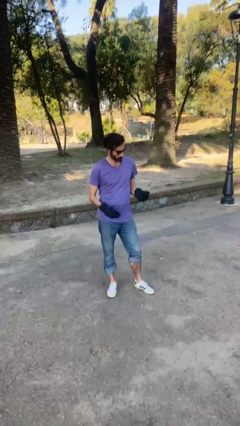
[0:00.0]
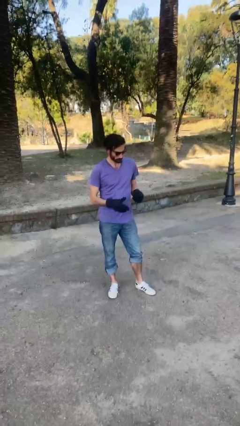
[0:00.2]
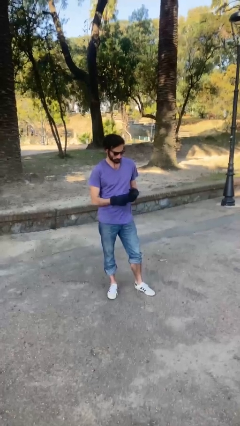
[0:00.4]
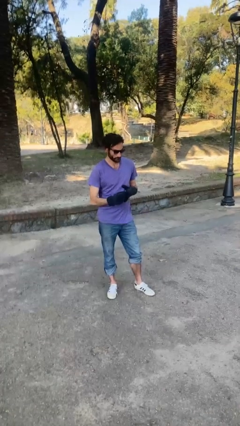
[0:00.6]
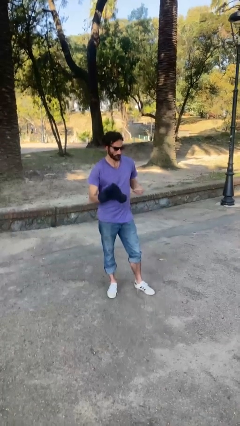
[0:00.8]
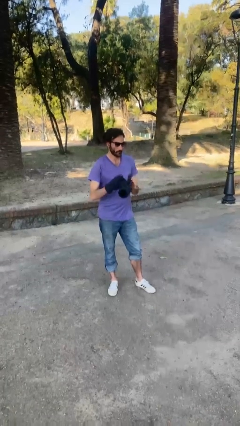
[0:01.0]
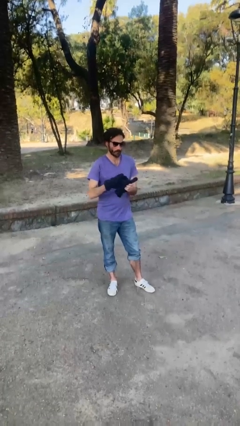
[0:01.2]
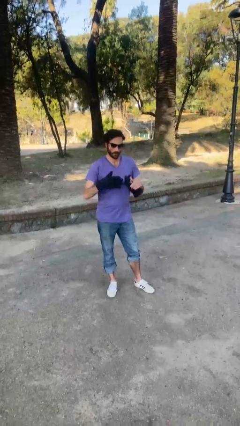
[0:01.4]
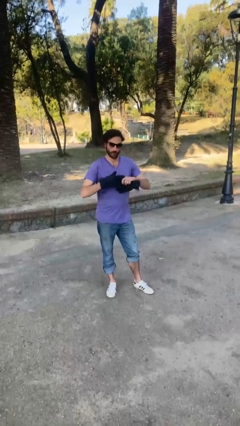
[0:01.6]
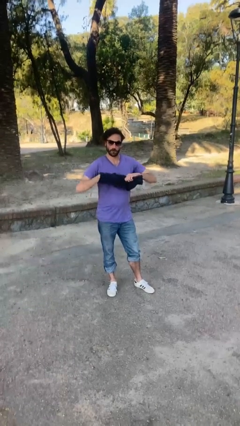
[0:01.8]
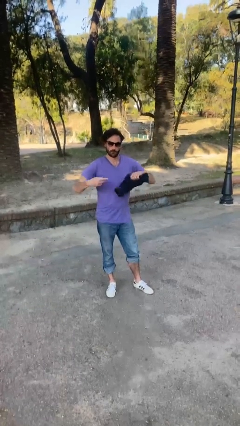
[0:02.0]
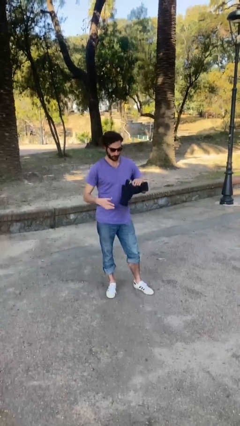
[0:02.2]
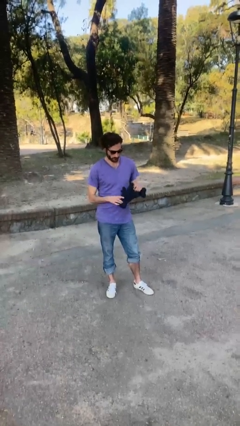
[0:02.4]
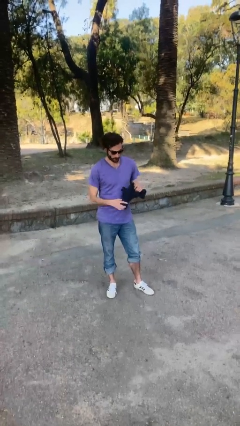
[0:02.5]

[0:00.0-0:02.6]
person takes off gloves

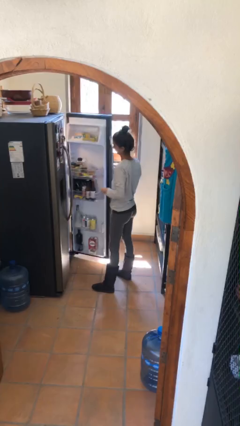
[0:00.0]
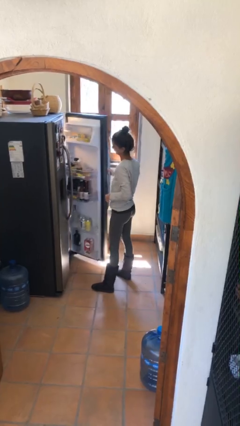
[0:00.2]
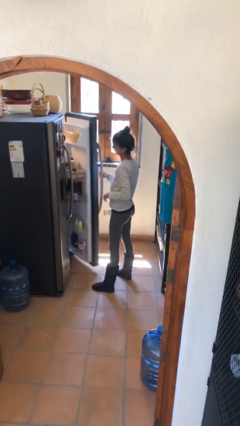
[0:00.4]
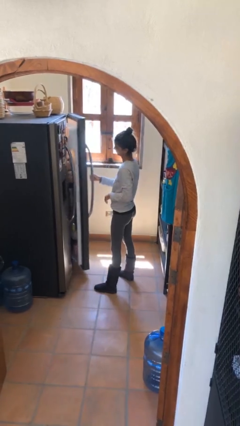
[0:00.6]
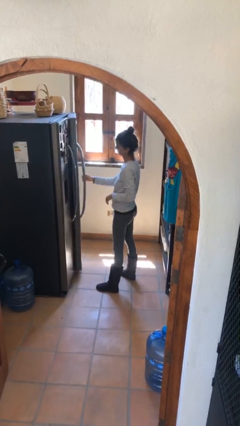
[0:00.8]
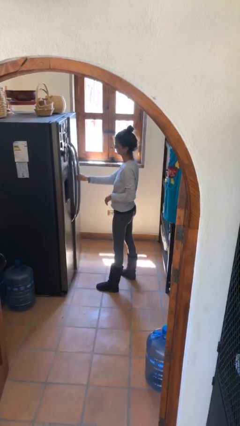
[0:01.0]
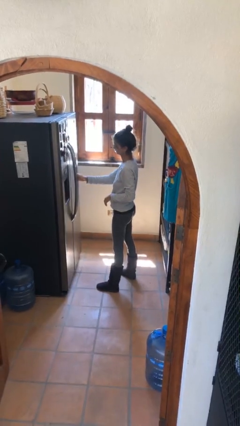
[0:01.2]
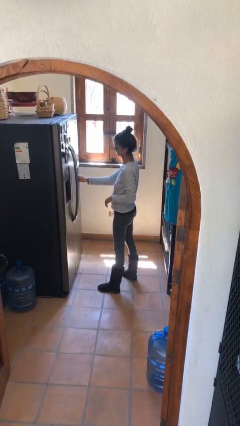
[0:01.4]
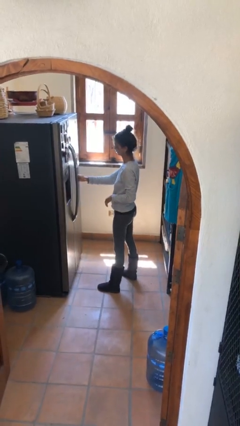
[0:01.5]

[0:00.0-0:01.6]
person closes refrigerator

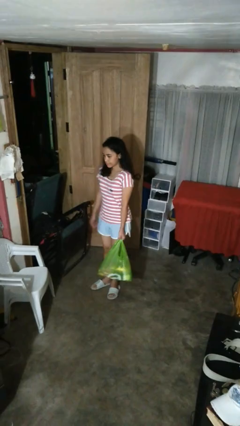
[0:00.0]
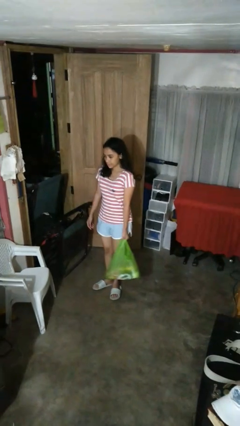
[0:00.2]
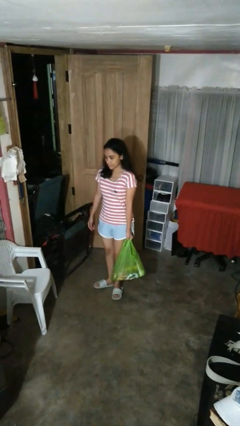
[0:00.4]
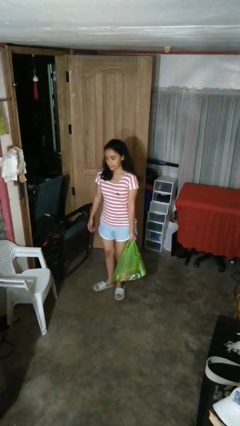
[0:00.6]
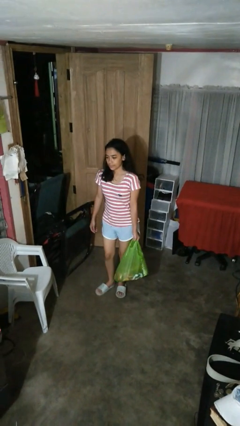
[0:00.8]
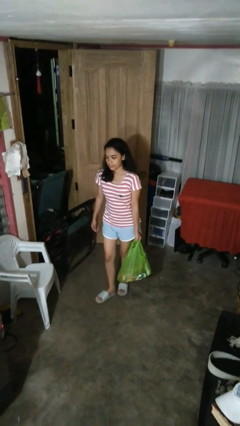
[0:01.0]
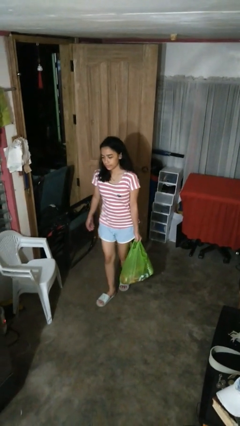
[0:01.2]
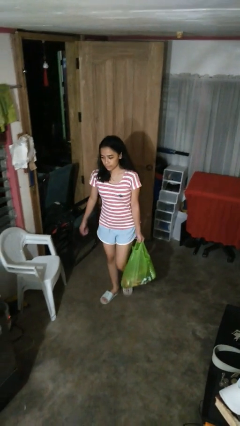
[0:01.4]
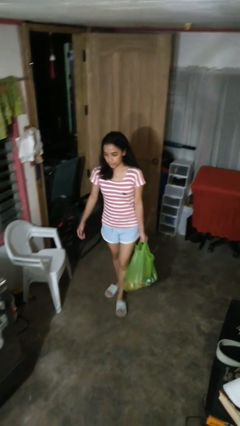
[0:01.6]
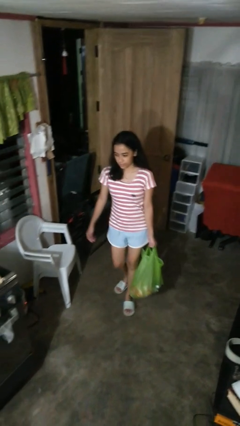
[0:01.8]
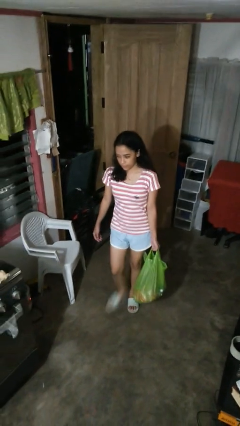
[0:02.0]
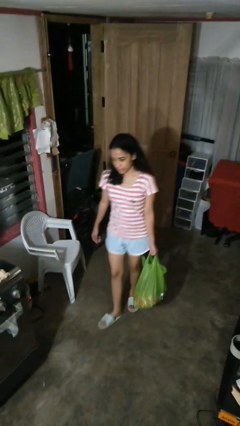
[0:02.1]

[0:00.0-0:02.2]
person carries groceries

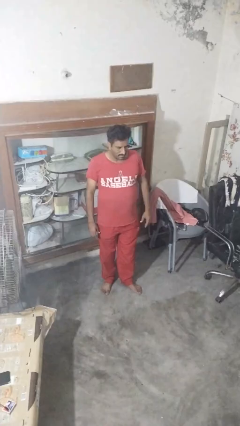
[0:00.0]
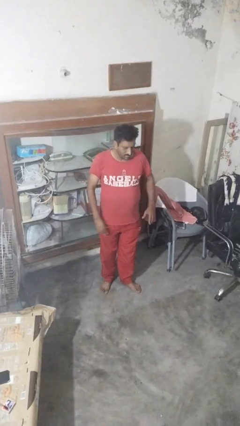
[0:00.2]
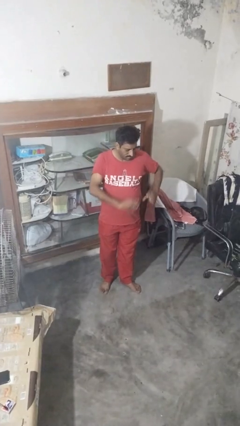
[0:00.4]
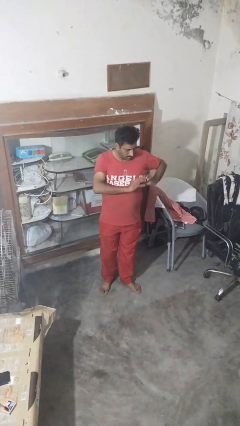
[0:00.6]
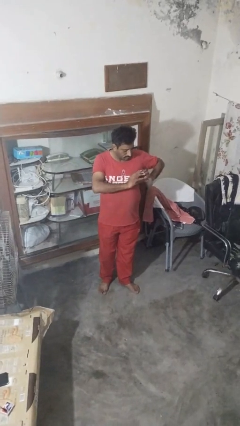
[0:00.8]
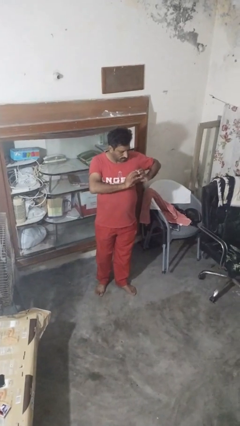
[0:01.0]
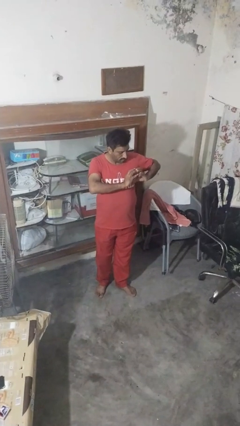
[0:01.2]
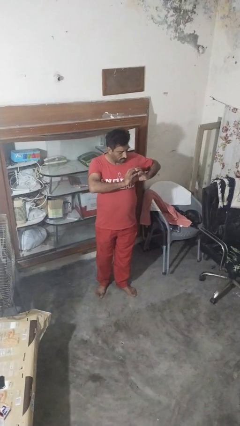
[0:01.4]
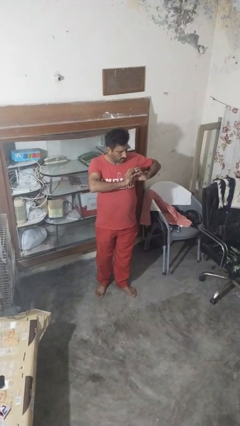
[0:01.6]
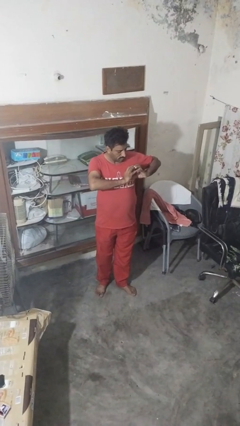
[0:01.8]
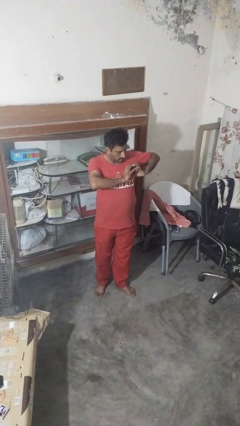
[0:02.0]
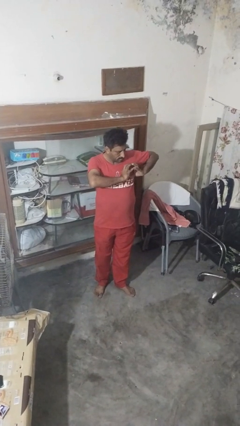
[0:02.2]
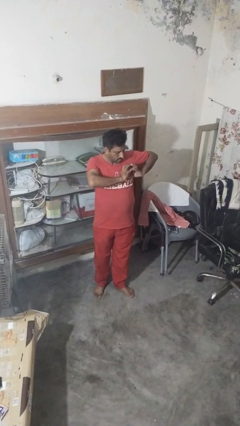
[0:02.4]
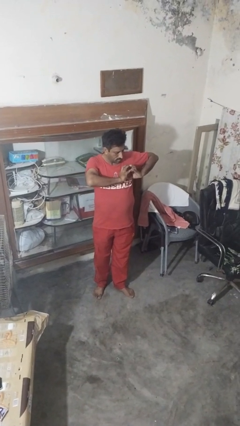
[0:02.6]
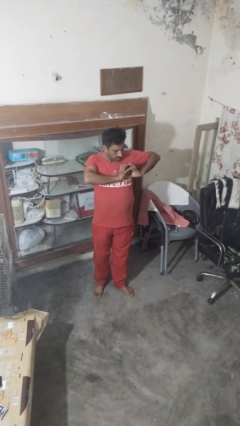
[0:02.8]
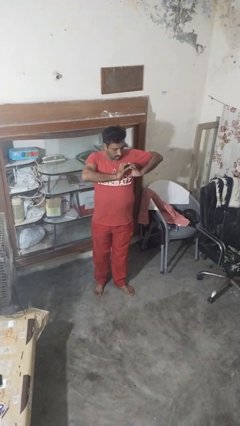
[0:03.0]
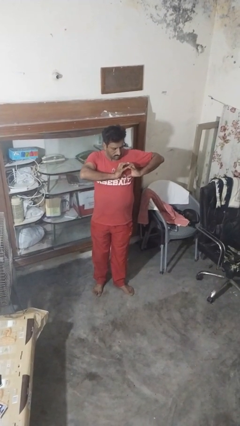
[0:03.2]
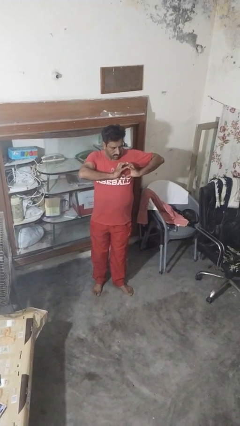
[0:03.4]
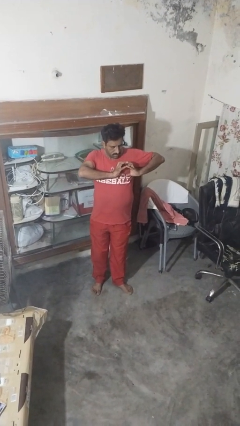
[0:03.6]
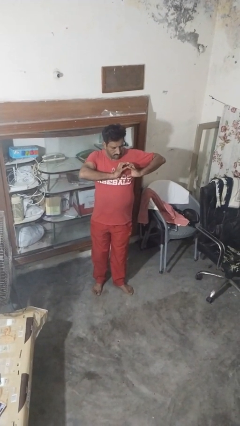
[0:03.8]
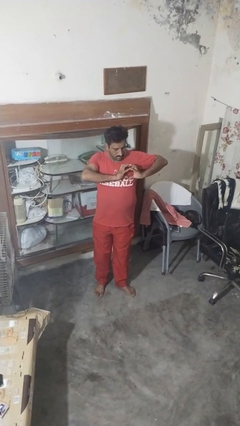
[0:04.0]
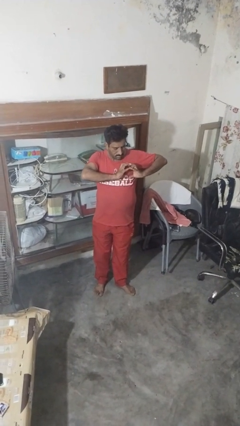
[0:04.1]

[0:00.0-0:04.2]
person gestures heart

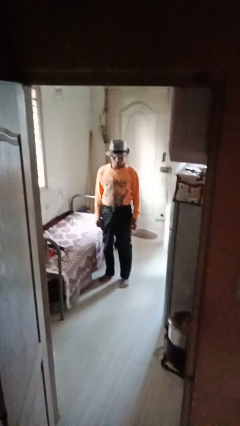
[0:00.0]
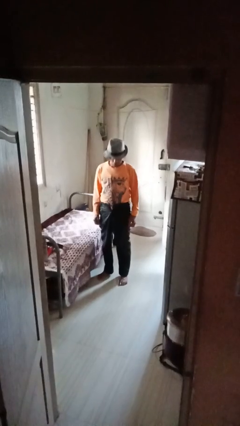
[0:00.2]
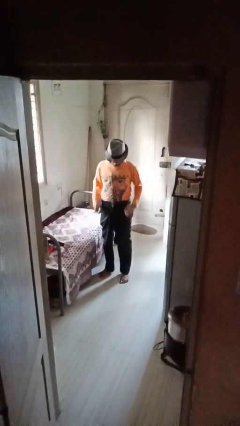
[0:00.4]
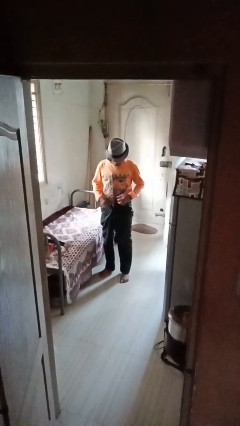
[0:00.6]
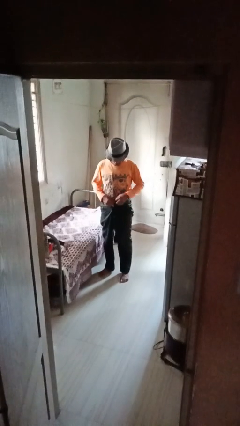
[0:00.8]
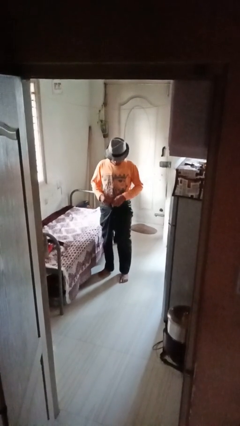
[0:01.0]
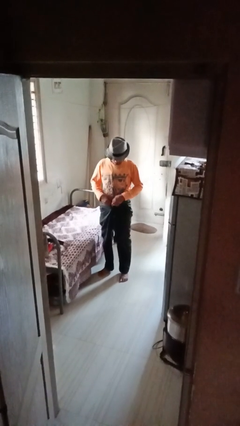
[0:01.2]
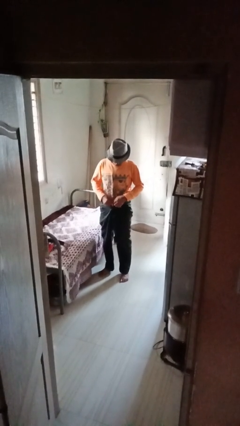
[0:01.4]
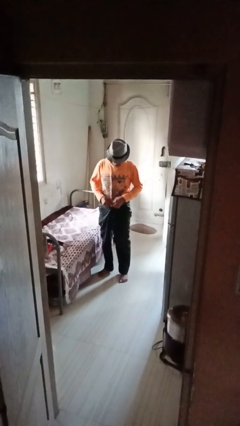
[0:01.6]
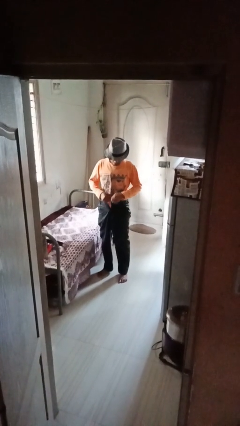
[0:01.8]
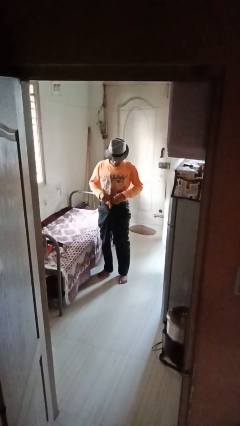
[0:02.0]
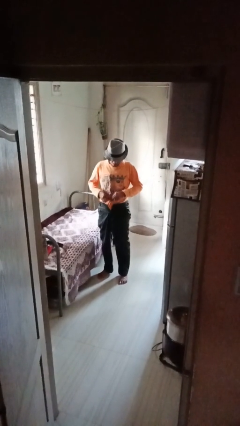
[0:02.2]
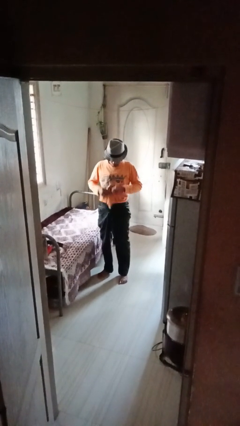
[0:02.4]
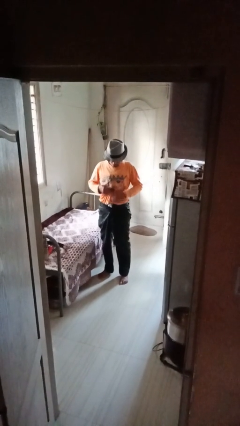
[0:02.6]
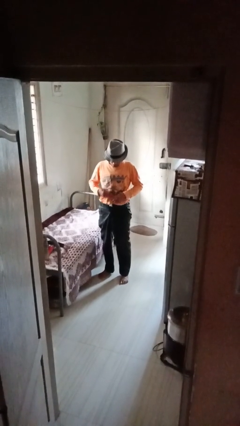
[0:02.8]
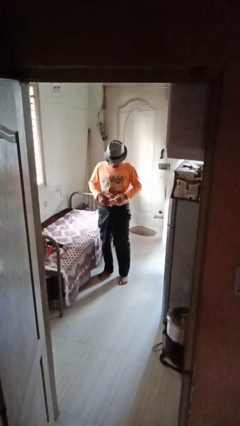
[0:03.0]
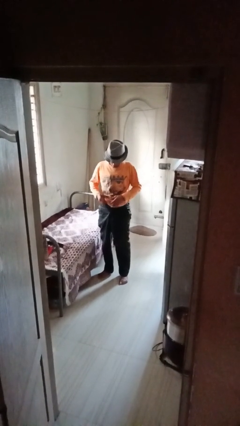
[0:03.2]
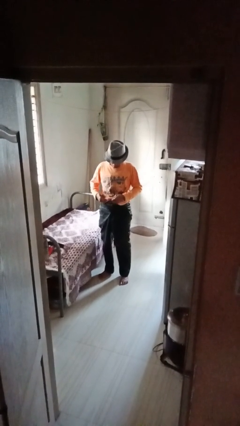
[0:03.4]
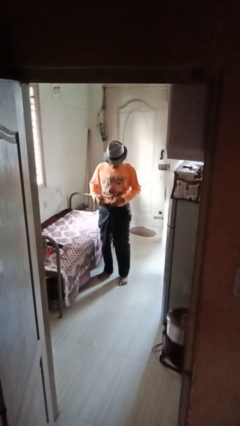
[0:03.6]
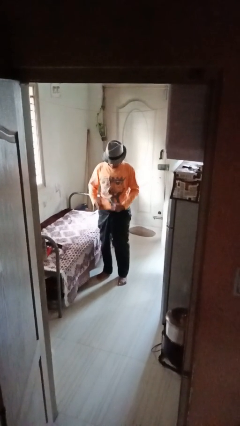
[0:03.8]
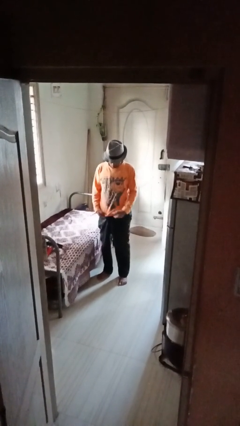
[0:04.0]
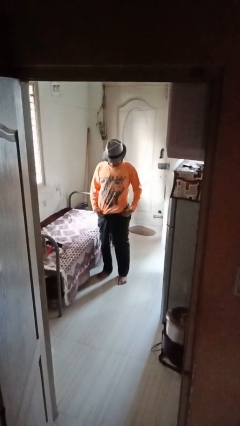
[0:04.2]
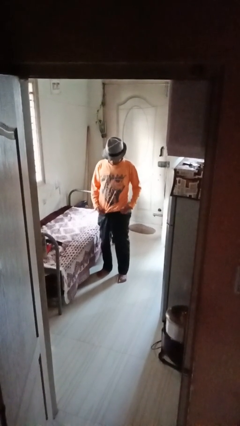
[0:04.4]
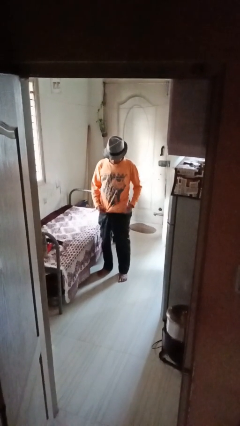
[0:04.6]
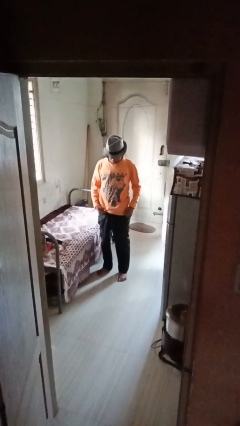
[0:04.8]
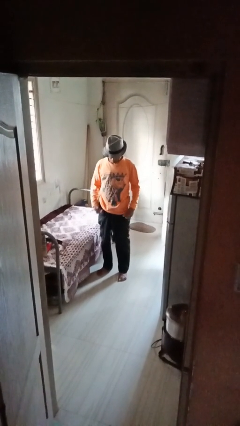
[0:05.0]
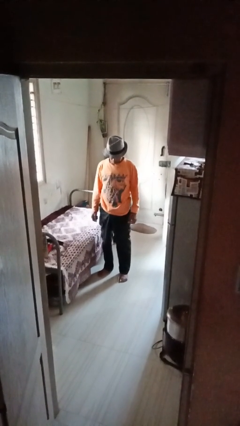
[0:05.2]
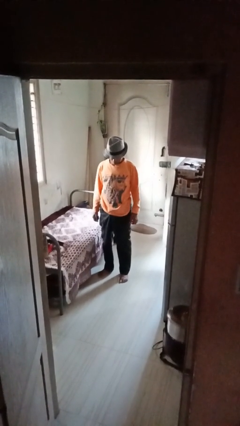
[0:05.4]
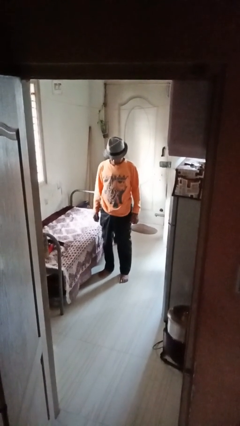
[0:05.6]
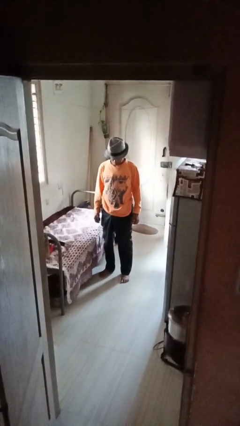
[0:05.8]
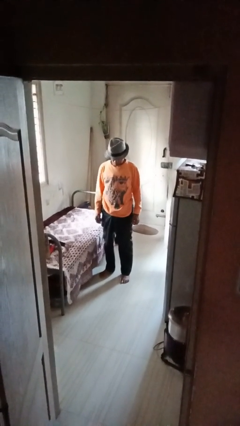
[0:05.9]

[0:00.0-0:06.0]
person untucks shirt

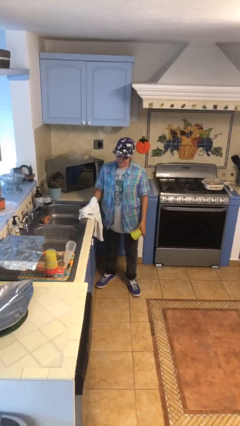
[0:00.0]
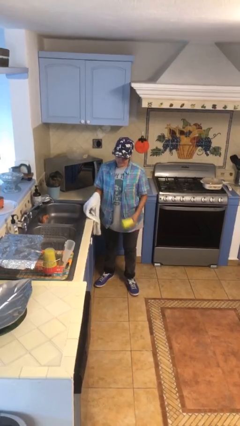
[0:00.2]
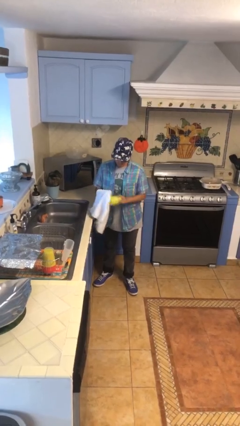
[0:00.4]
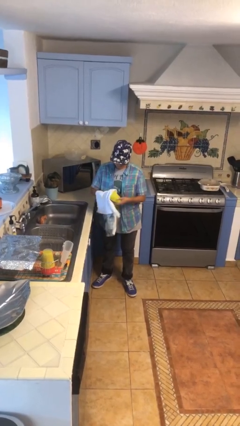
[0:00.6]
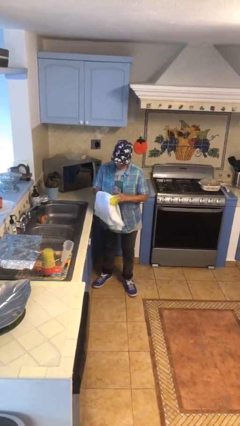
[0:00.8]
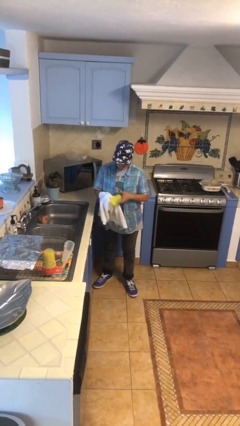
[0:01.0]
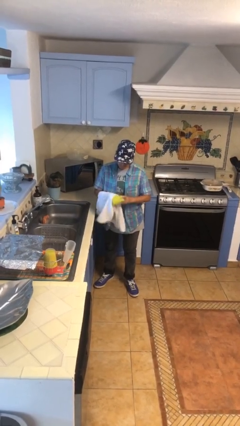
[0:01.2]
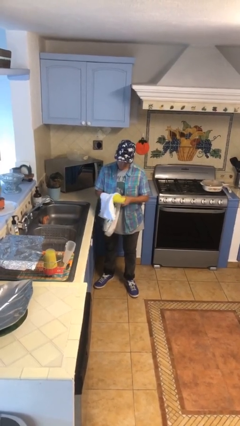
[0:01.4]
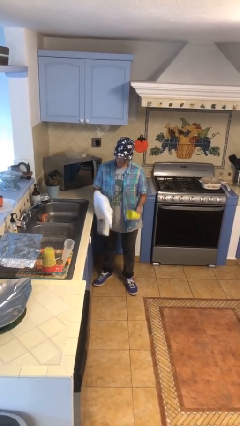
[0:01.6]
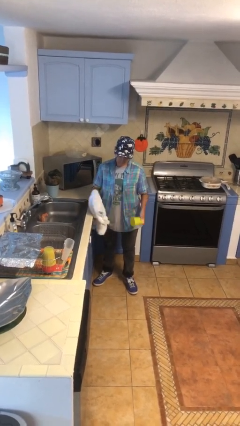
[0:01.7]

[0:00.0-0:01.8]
person dries dish
